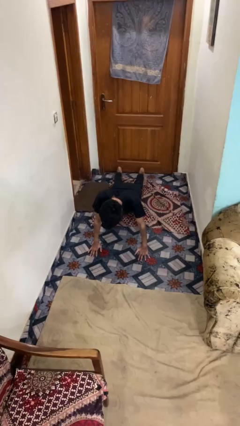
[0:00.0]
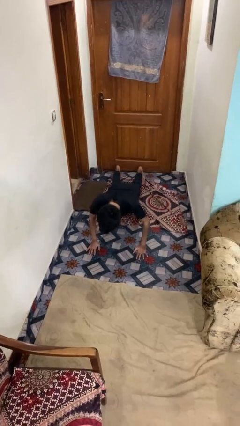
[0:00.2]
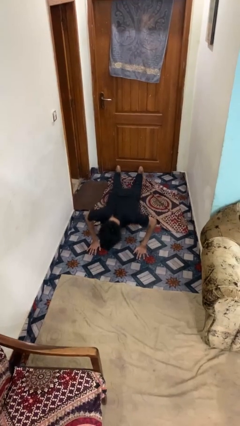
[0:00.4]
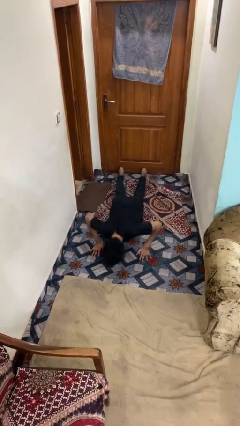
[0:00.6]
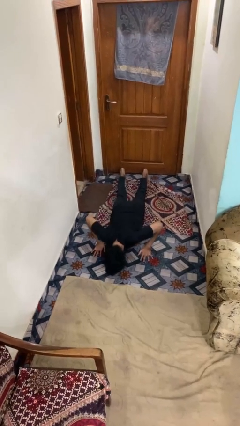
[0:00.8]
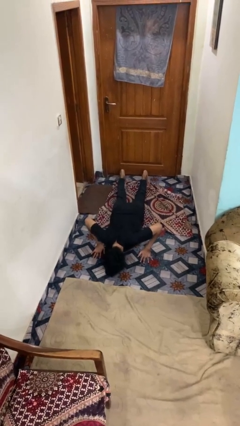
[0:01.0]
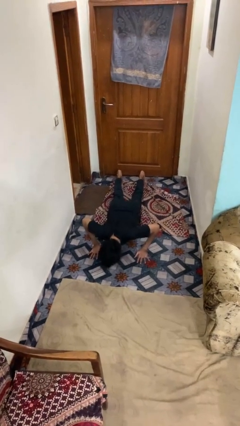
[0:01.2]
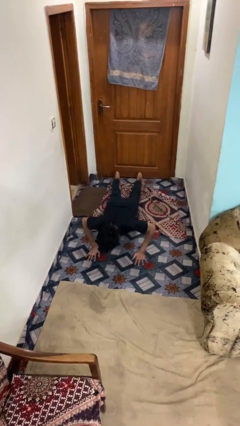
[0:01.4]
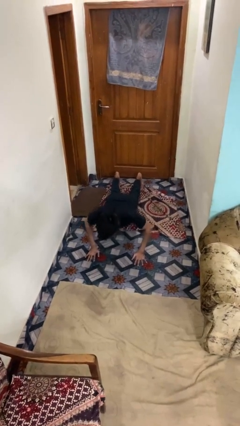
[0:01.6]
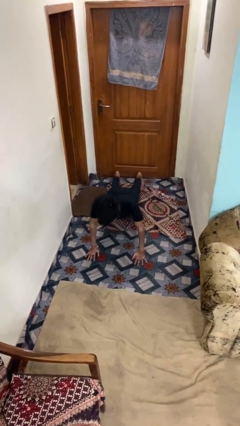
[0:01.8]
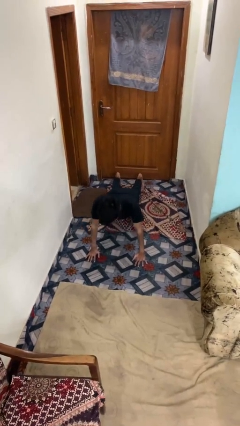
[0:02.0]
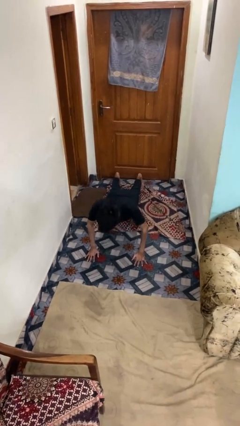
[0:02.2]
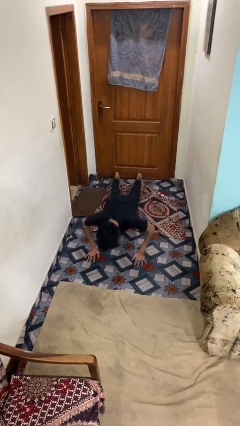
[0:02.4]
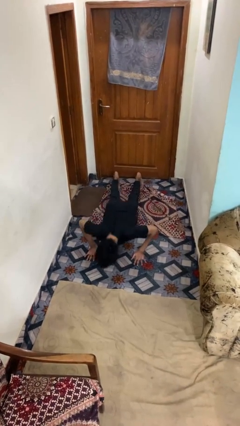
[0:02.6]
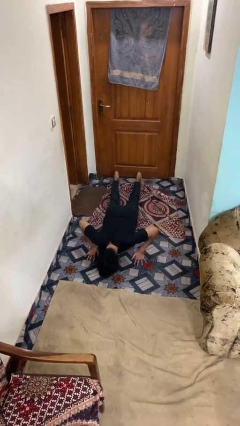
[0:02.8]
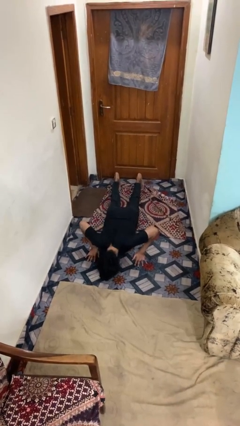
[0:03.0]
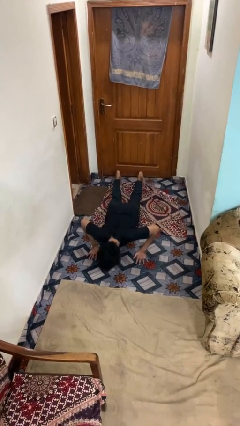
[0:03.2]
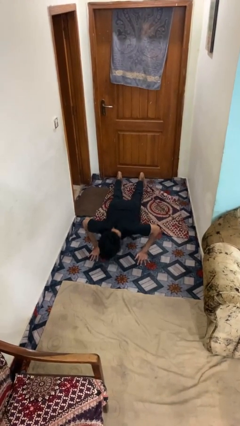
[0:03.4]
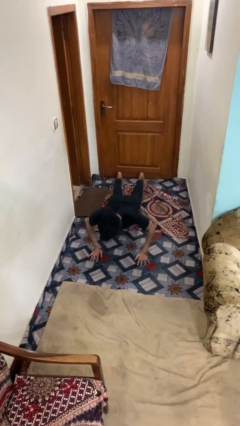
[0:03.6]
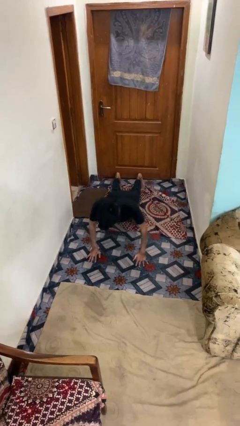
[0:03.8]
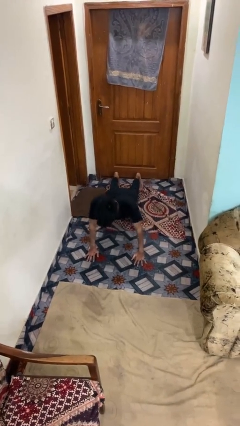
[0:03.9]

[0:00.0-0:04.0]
person exercises with pushup

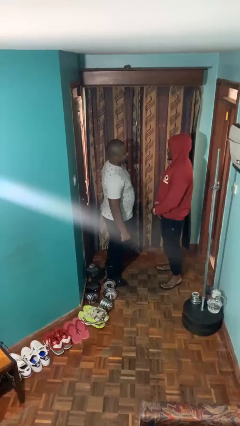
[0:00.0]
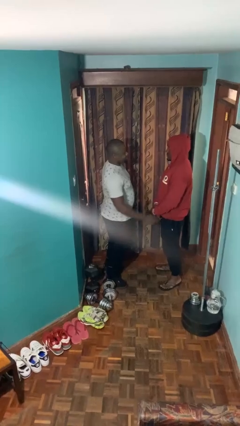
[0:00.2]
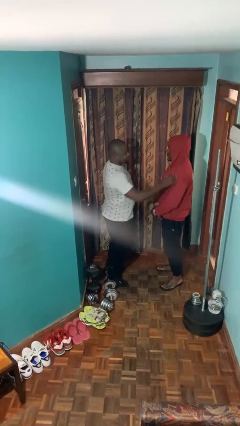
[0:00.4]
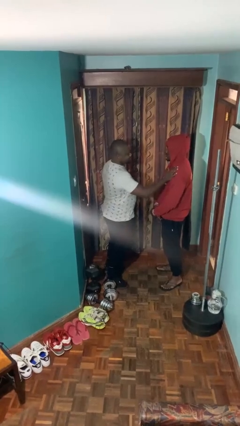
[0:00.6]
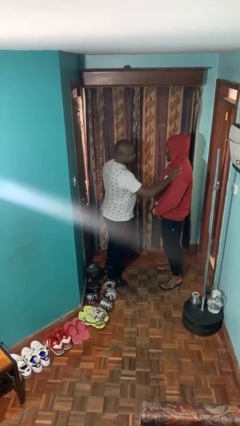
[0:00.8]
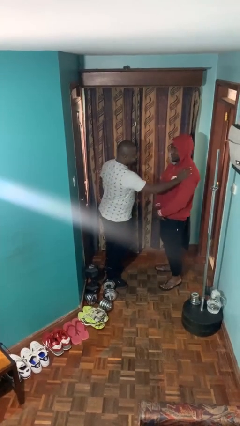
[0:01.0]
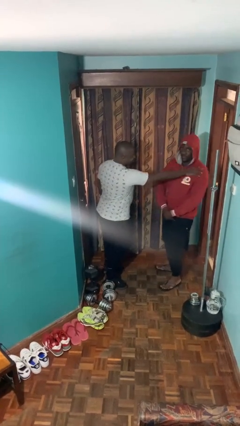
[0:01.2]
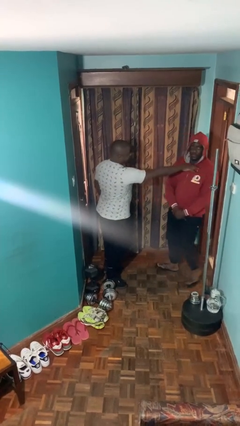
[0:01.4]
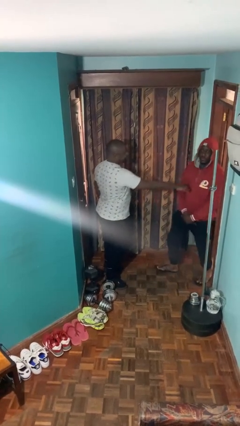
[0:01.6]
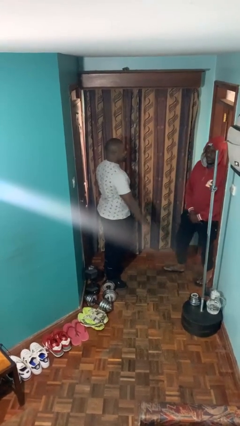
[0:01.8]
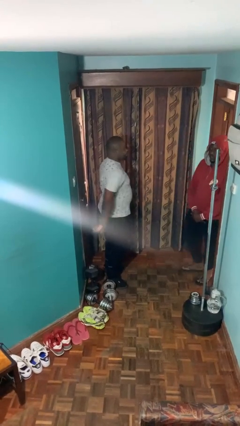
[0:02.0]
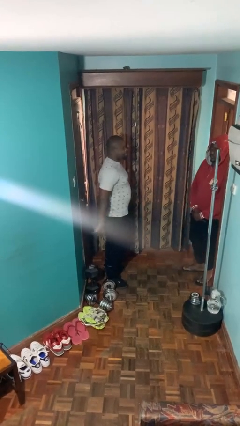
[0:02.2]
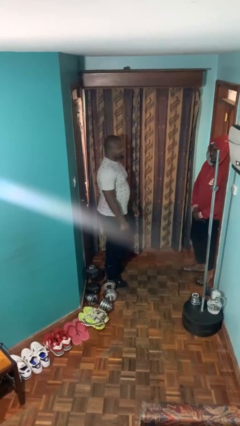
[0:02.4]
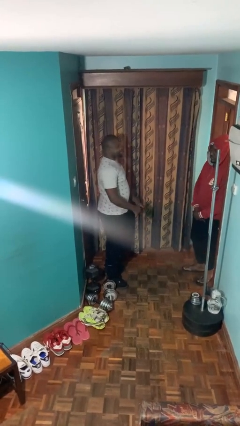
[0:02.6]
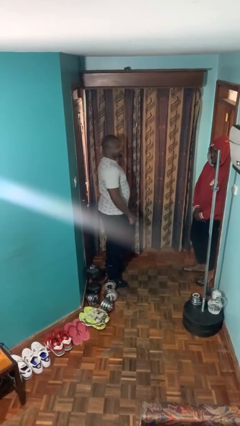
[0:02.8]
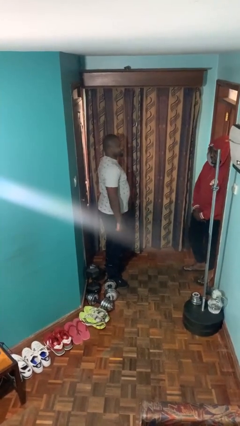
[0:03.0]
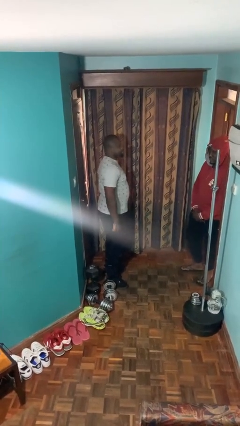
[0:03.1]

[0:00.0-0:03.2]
person shoves person

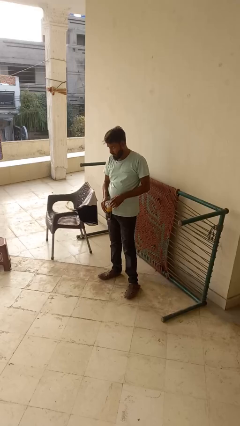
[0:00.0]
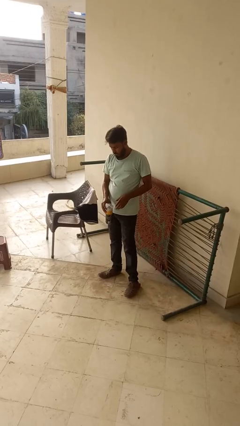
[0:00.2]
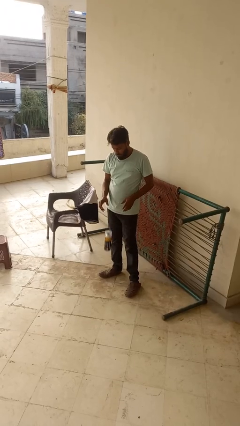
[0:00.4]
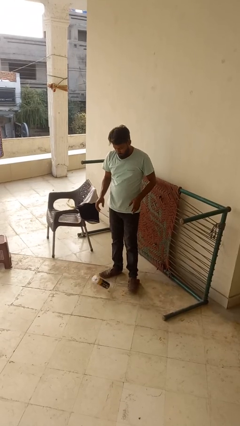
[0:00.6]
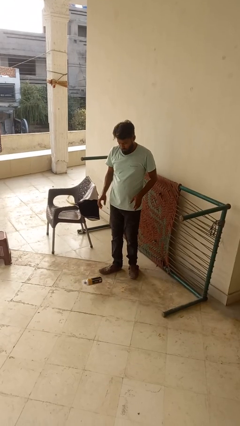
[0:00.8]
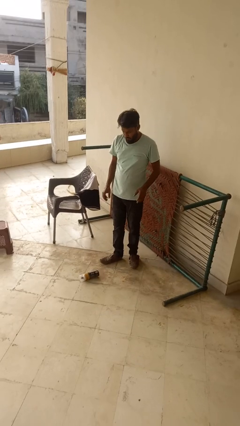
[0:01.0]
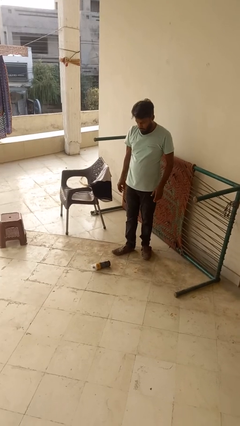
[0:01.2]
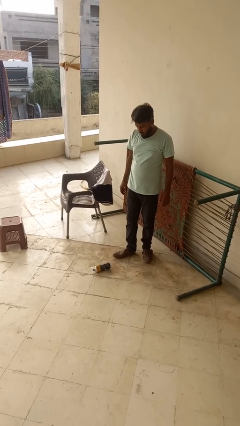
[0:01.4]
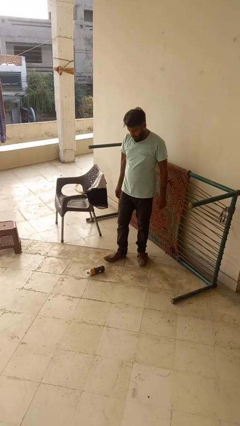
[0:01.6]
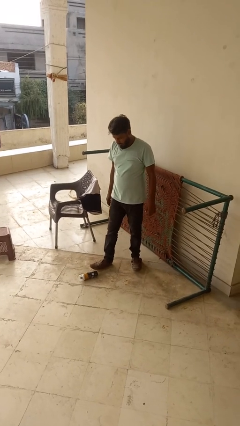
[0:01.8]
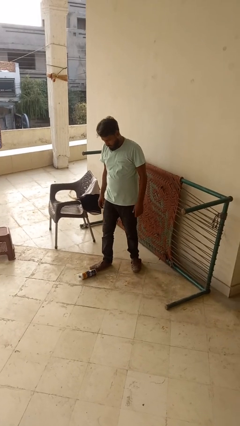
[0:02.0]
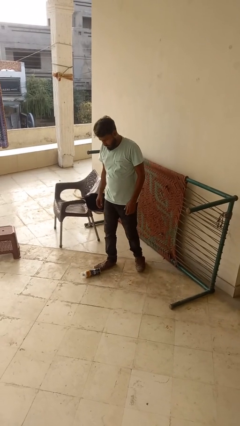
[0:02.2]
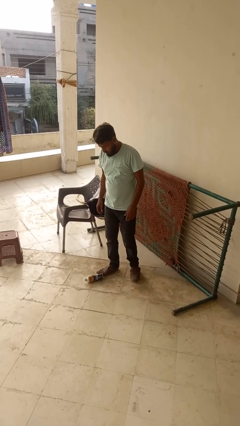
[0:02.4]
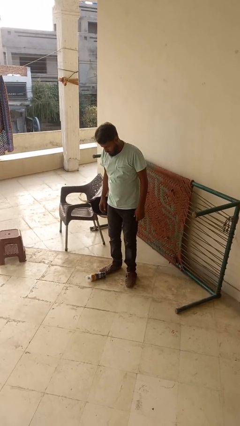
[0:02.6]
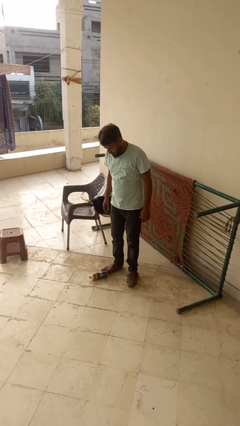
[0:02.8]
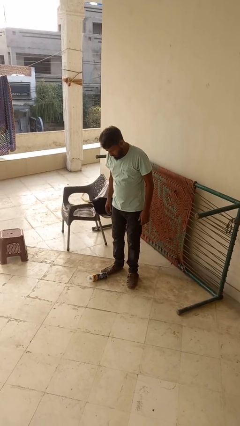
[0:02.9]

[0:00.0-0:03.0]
person drops object

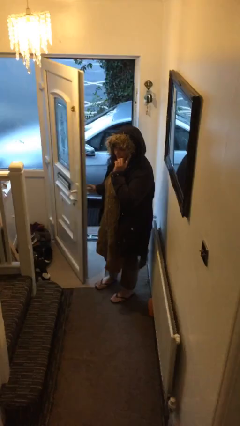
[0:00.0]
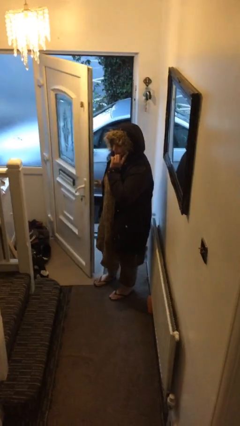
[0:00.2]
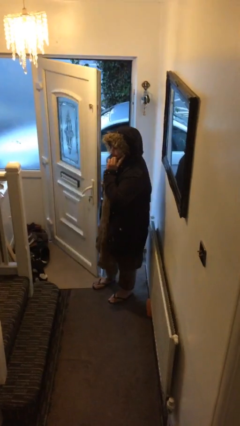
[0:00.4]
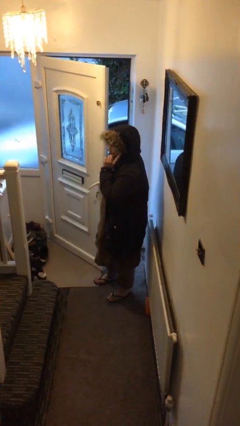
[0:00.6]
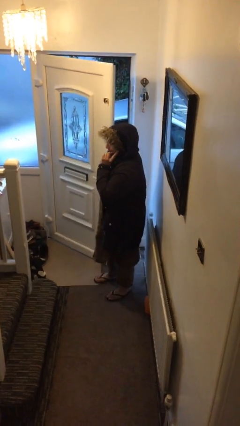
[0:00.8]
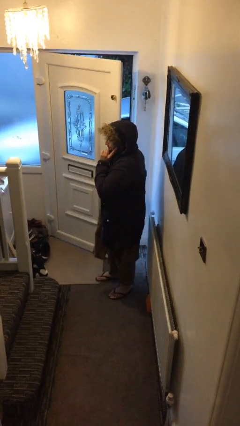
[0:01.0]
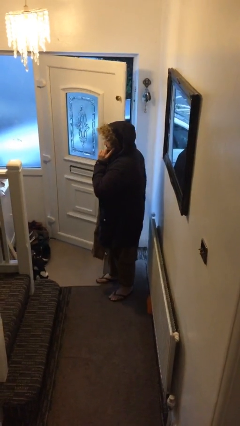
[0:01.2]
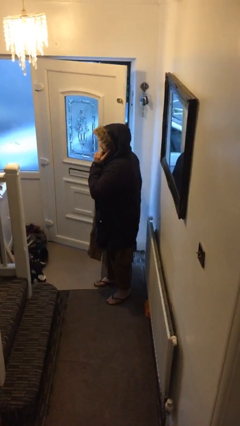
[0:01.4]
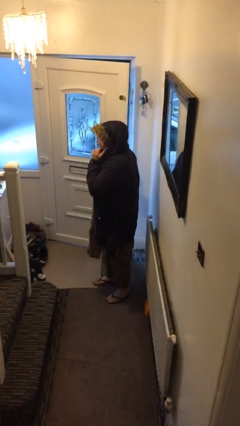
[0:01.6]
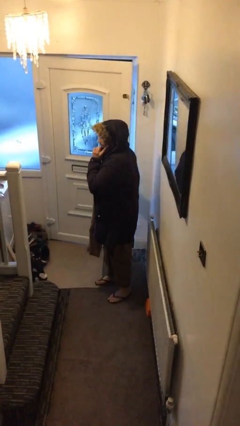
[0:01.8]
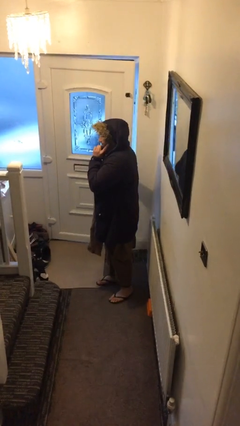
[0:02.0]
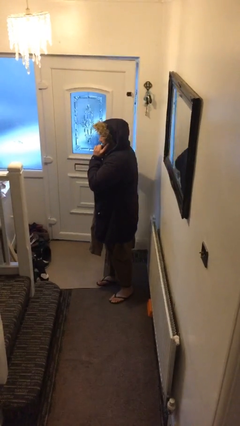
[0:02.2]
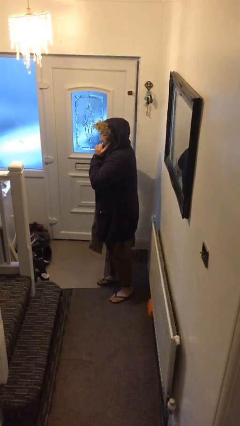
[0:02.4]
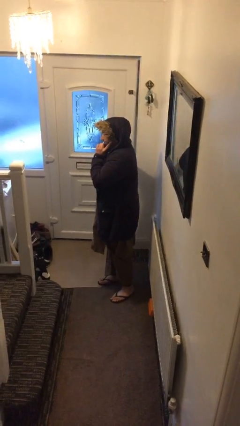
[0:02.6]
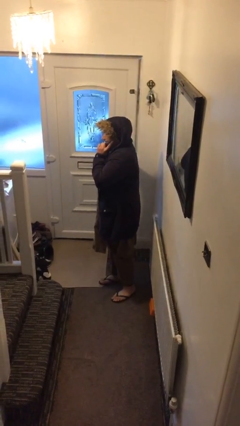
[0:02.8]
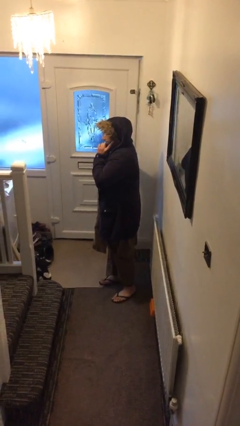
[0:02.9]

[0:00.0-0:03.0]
person closes facility door

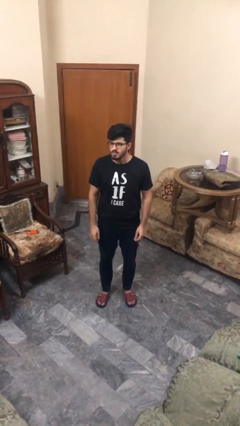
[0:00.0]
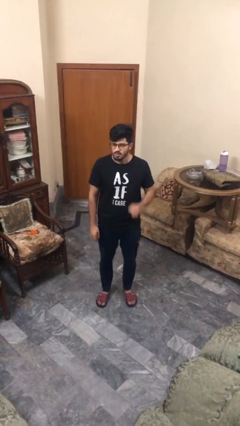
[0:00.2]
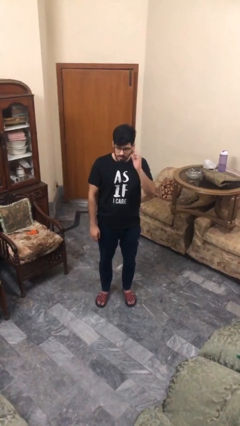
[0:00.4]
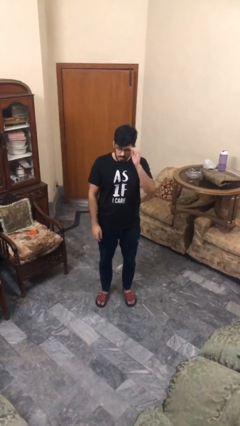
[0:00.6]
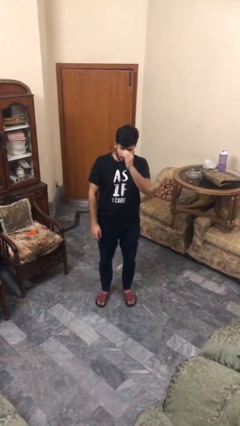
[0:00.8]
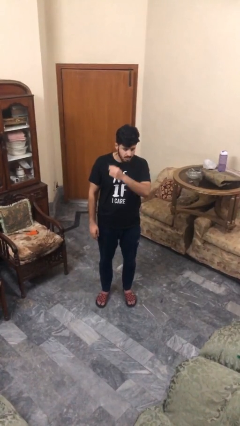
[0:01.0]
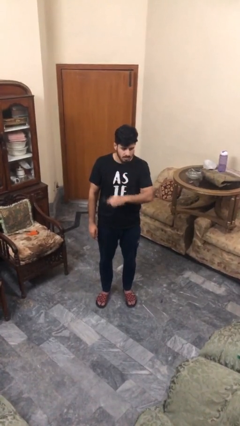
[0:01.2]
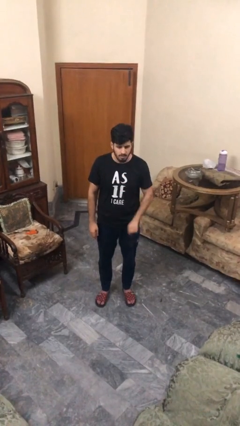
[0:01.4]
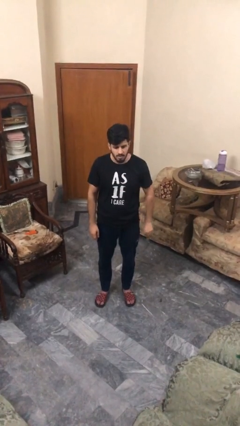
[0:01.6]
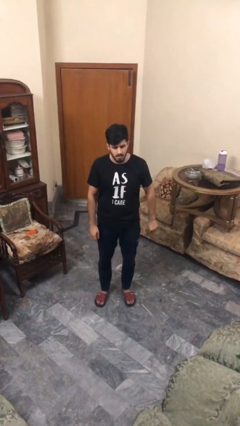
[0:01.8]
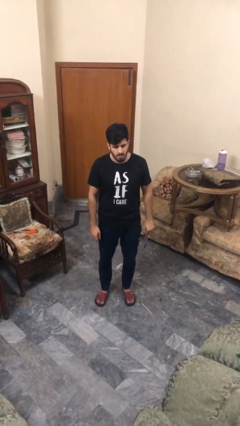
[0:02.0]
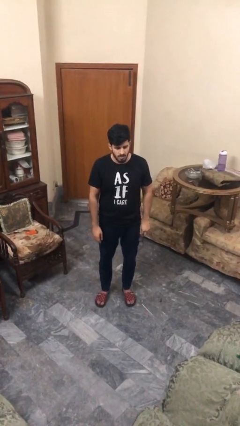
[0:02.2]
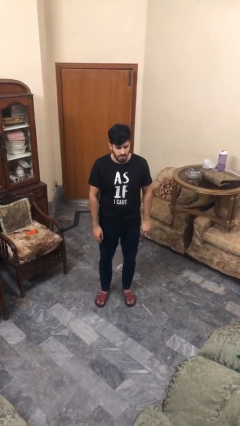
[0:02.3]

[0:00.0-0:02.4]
person takes off glasses

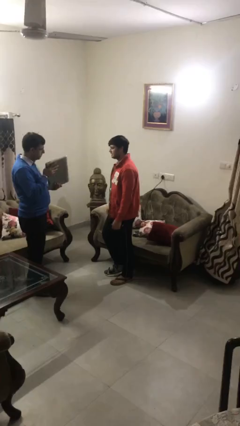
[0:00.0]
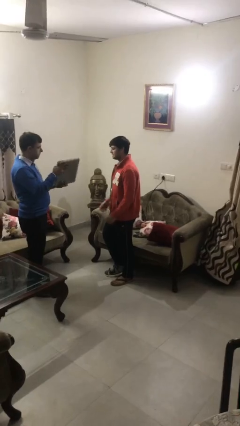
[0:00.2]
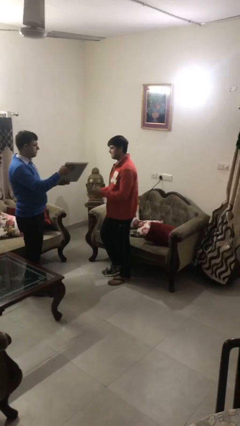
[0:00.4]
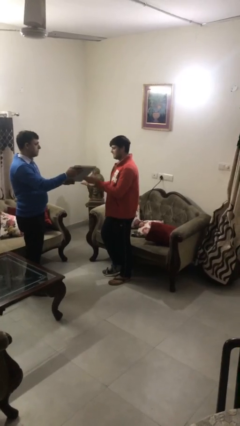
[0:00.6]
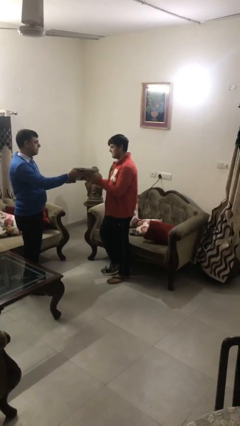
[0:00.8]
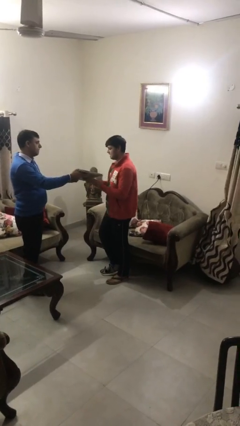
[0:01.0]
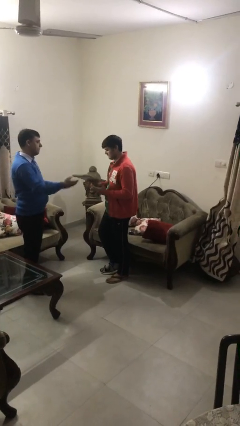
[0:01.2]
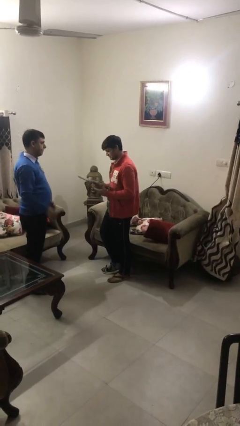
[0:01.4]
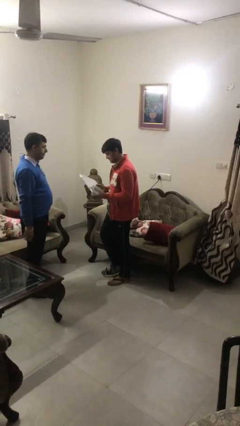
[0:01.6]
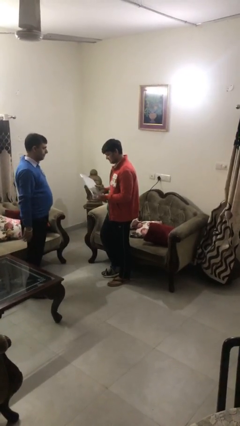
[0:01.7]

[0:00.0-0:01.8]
person transfers object to person
